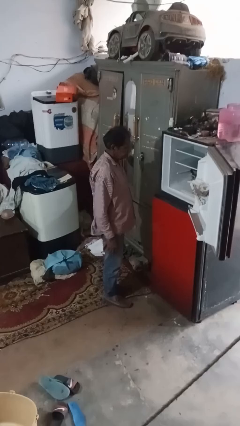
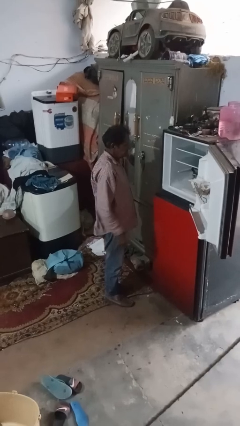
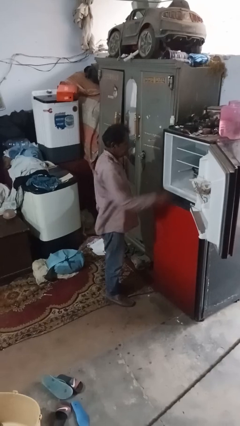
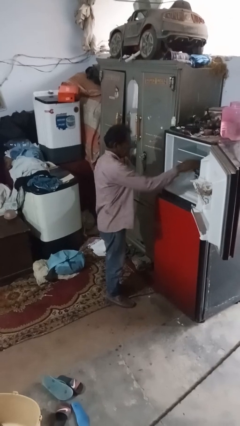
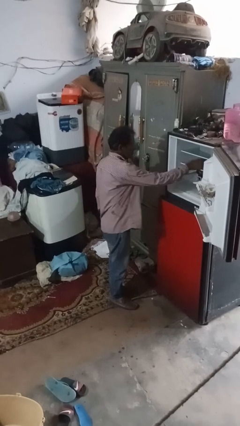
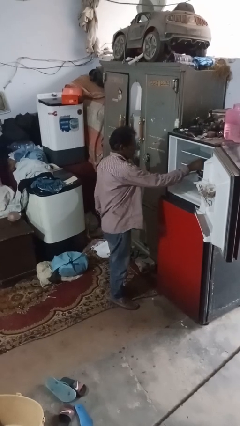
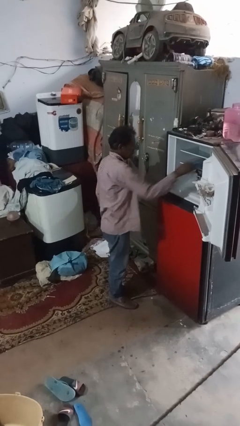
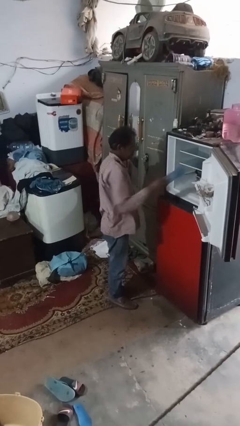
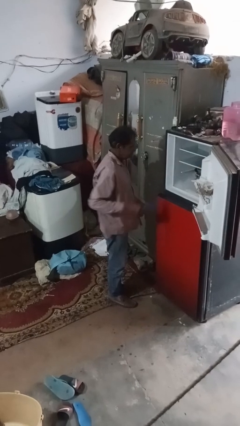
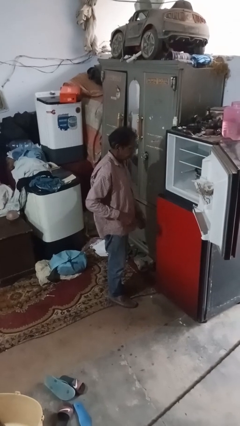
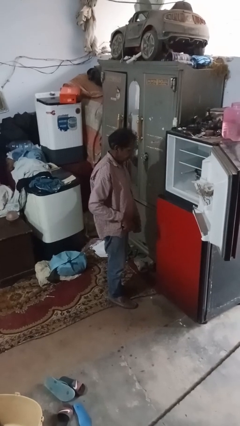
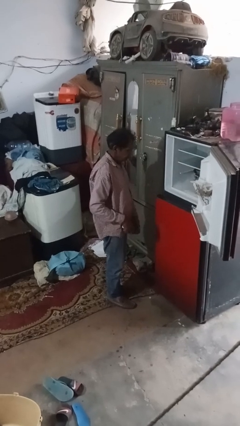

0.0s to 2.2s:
person takes object from refrigerator

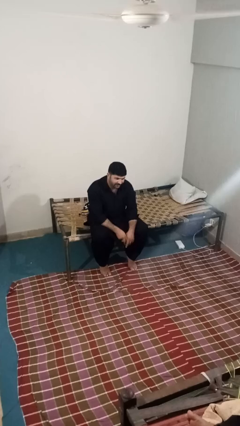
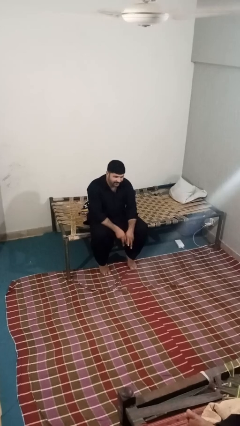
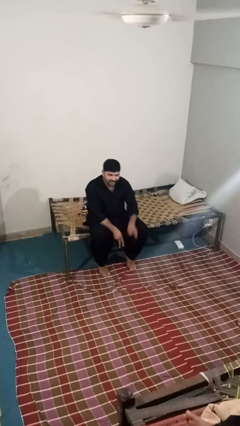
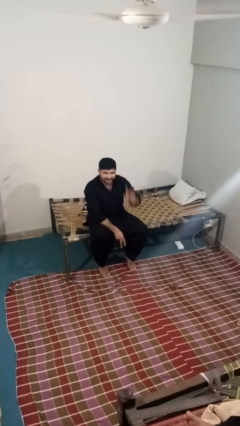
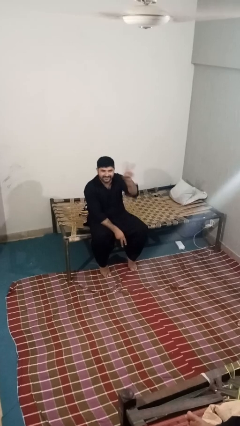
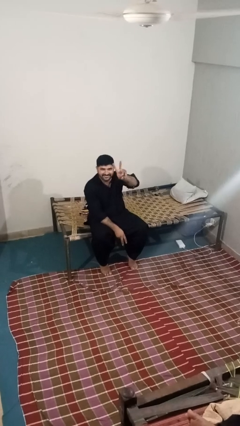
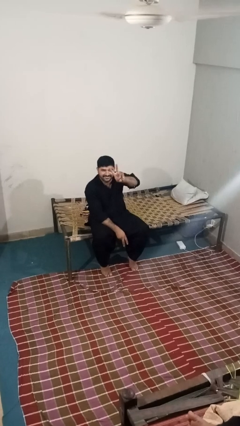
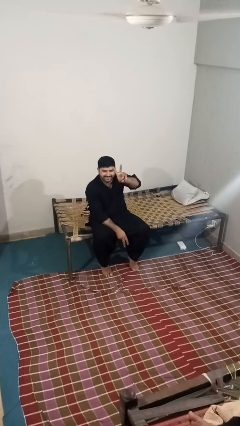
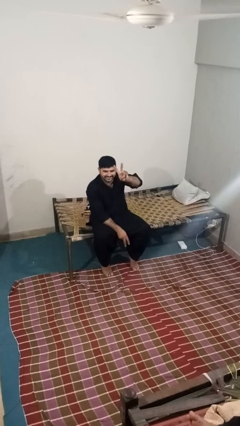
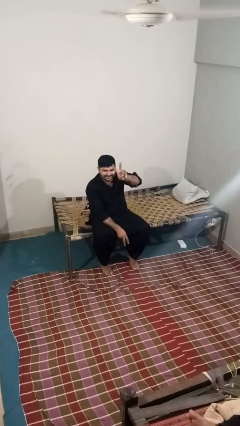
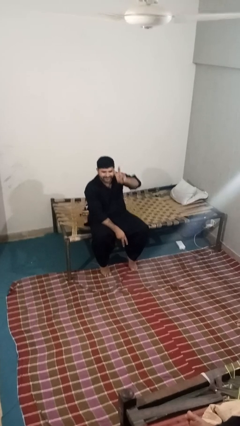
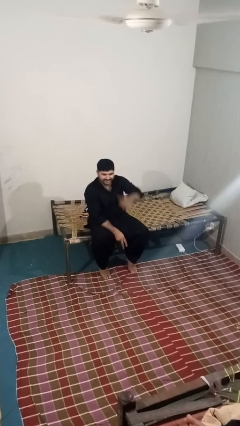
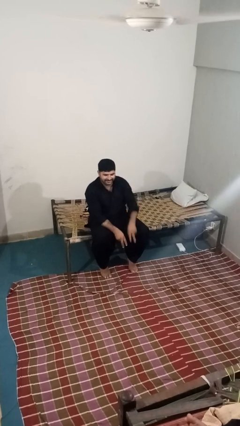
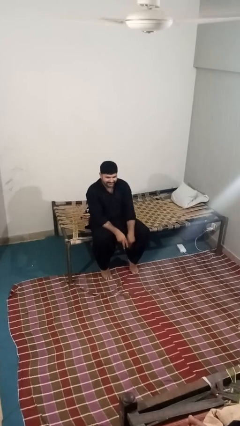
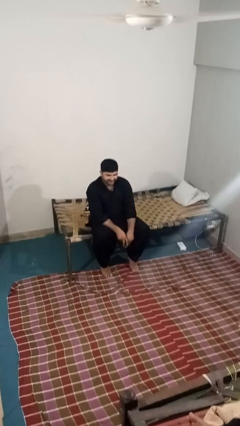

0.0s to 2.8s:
person gestures peace

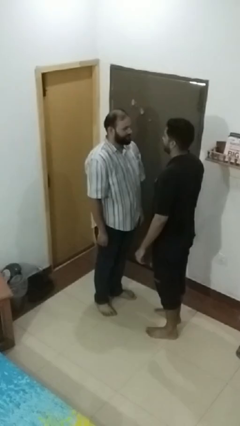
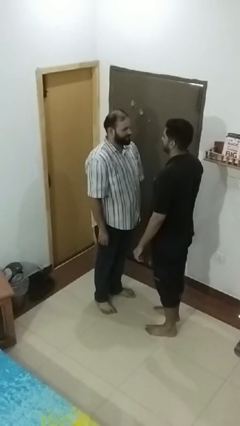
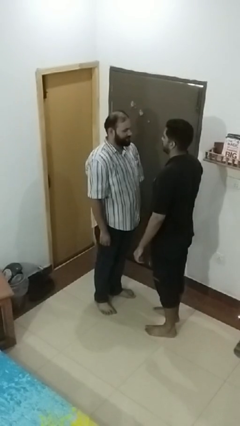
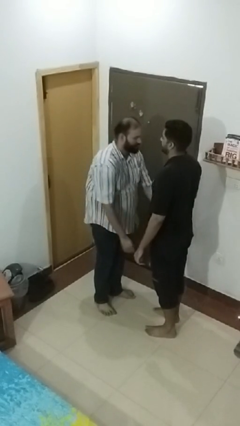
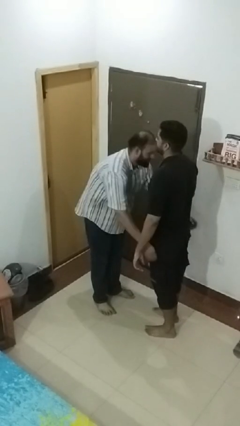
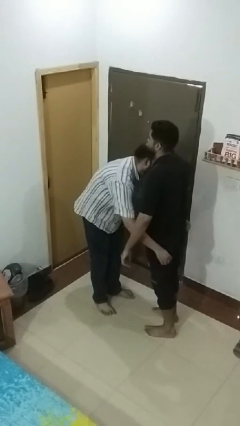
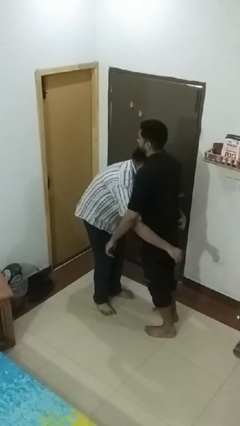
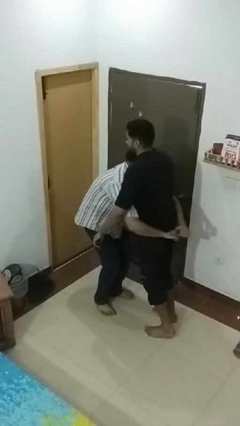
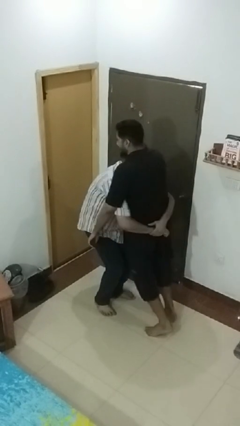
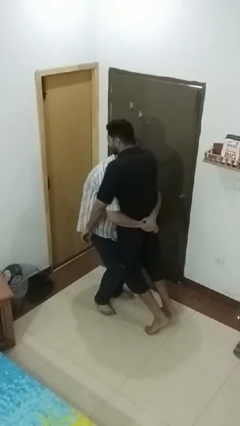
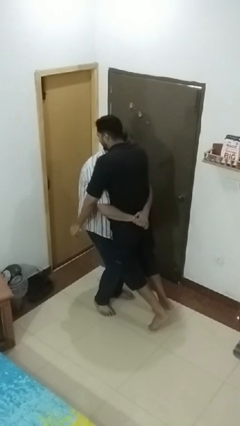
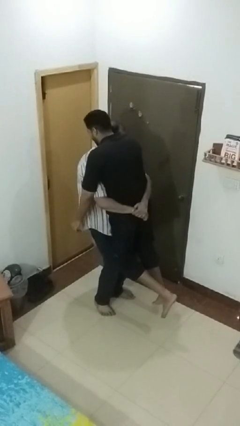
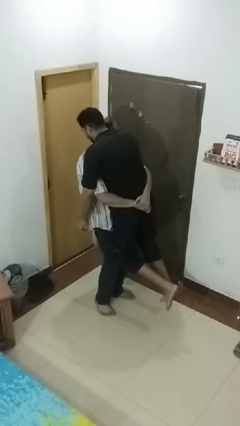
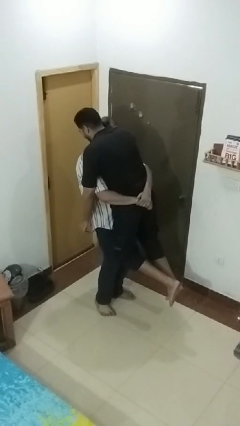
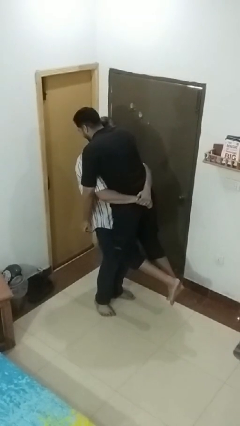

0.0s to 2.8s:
person picks up person

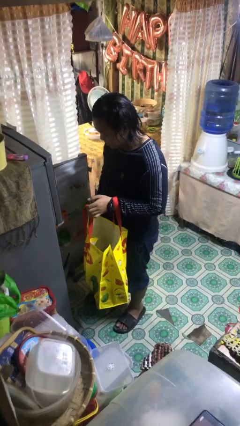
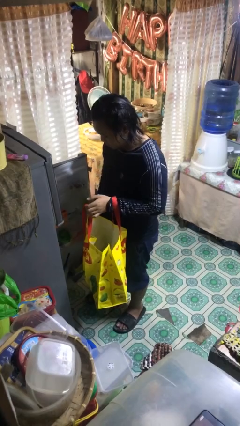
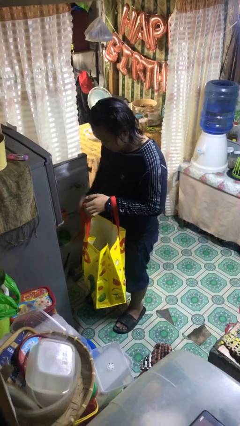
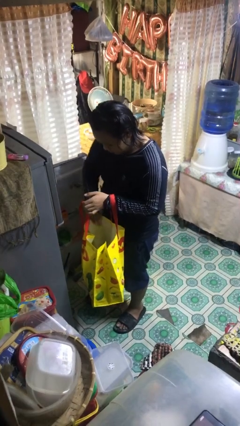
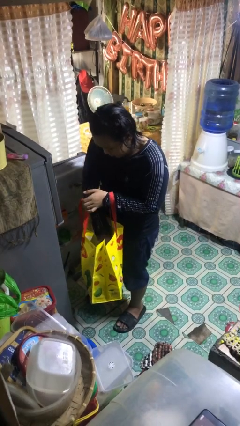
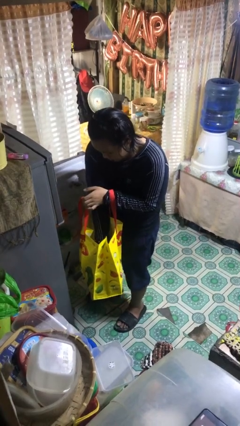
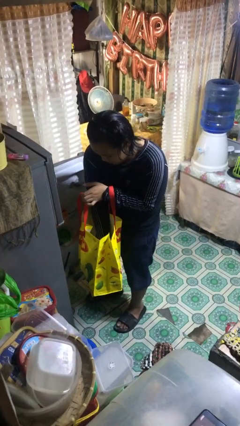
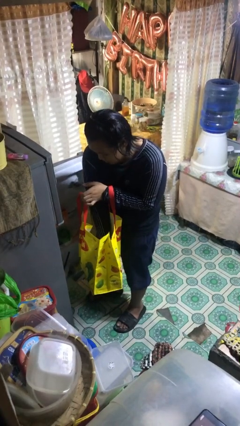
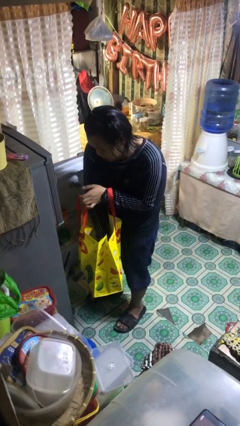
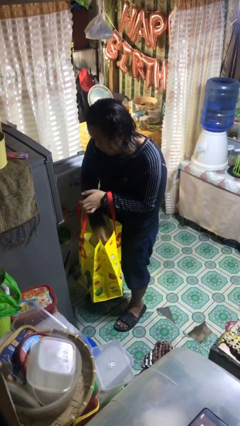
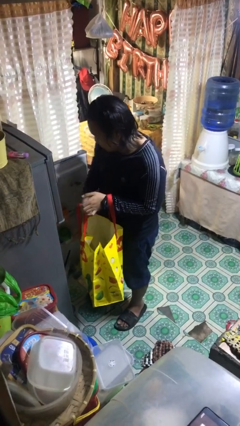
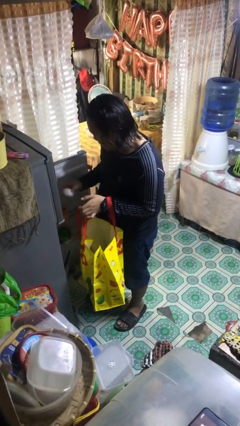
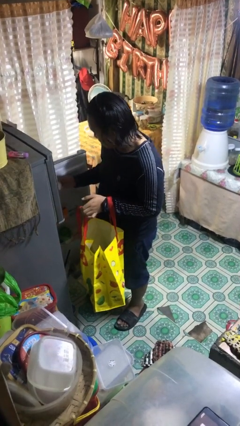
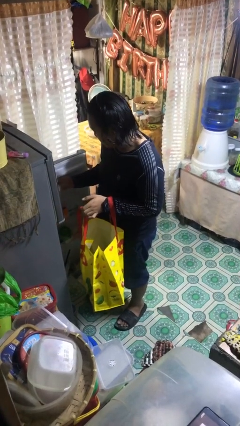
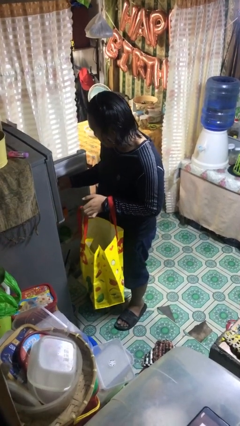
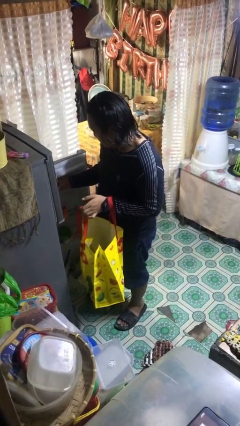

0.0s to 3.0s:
person loads groceries into refrigerator

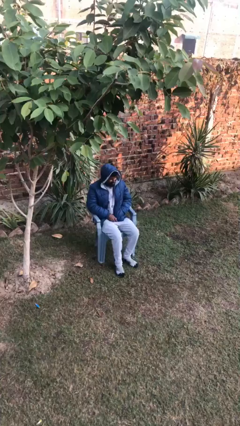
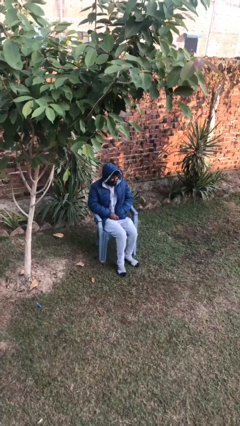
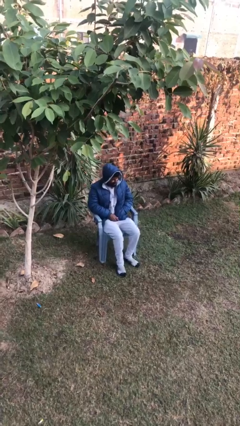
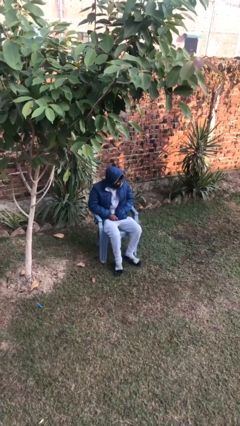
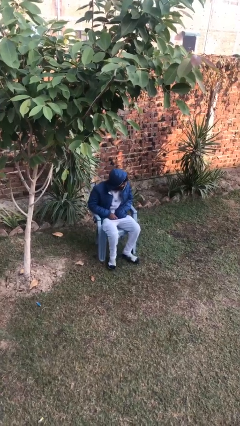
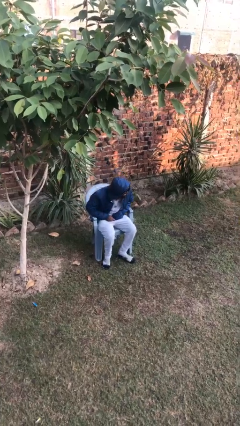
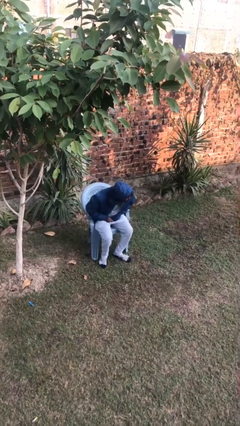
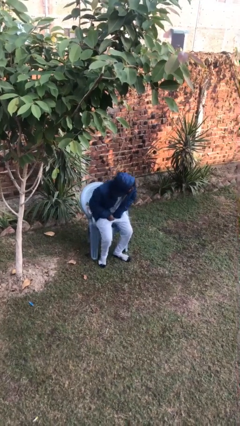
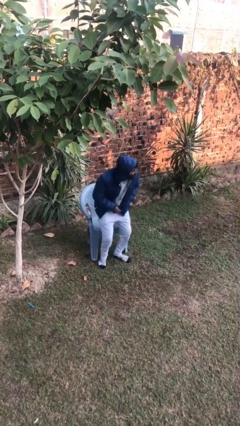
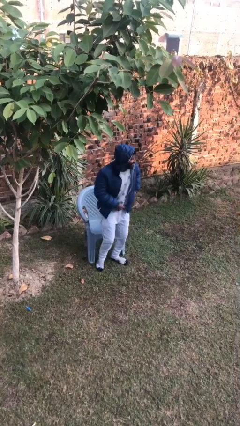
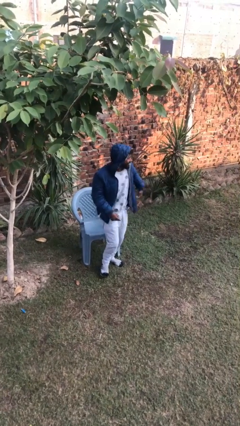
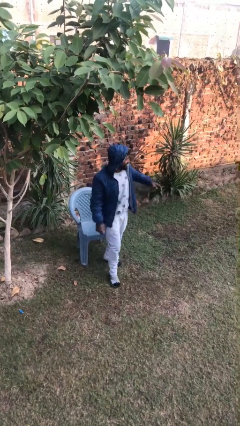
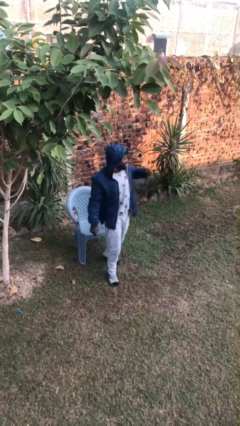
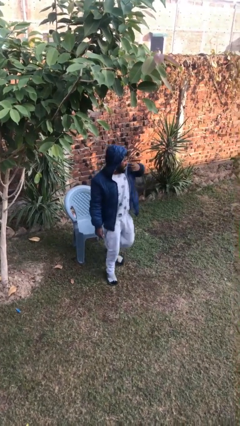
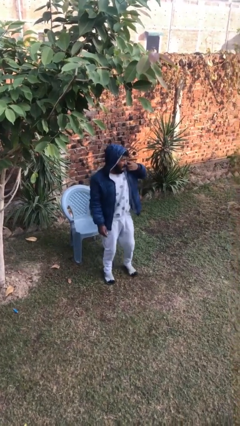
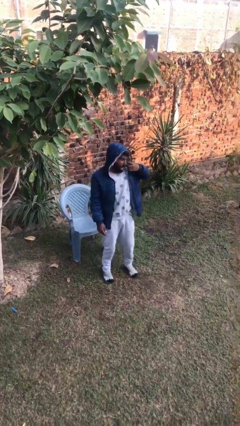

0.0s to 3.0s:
person stands up

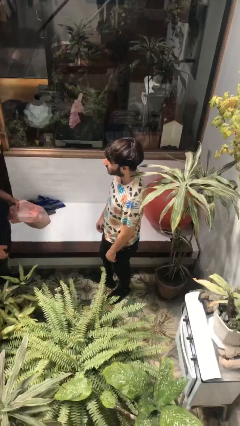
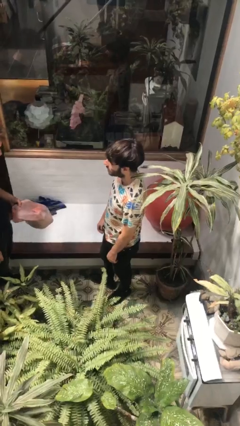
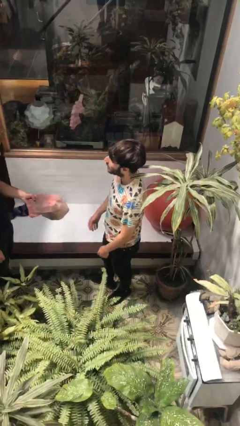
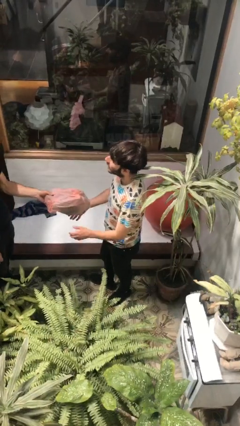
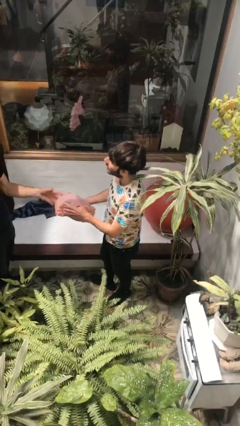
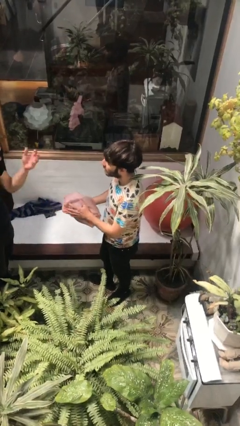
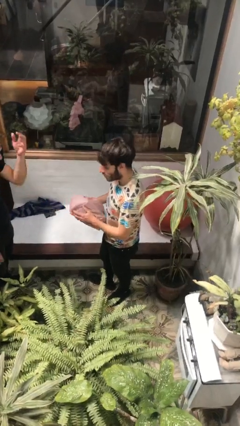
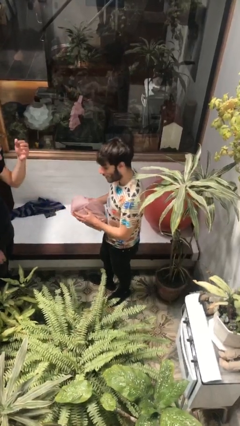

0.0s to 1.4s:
person transfers object to person

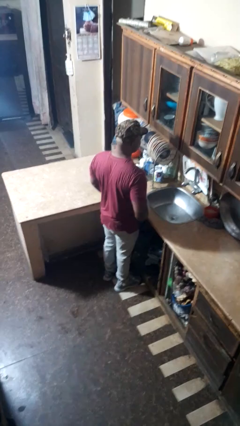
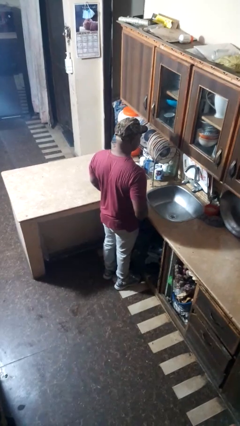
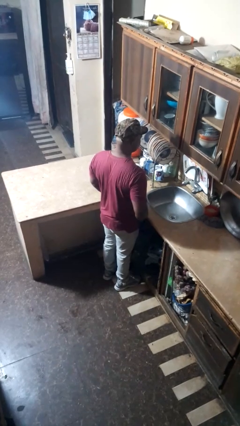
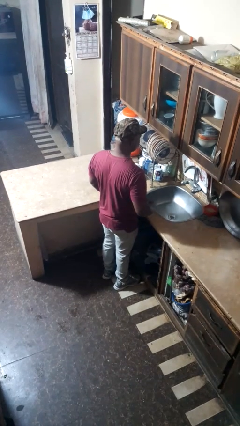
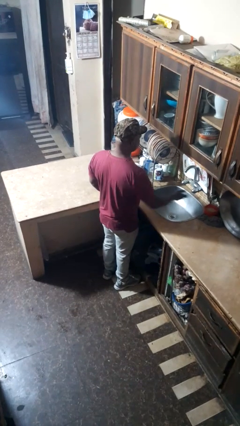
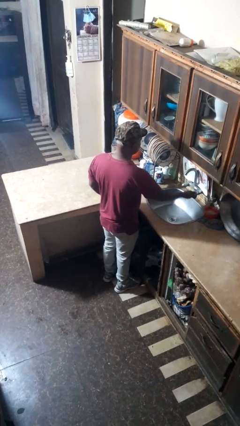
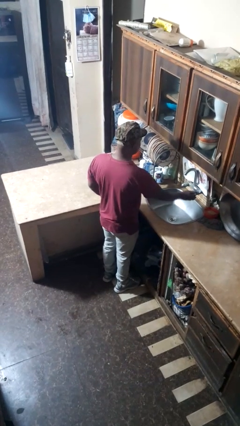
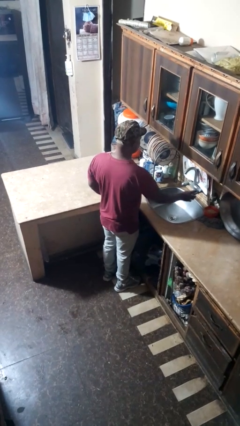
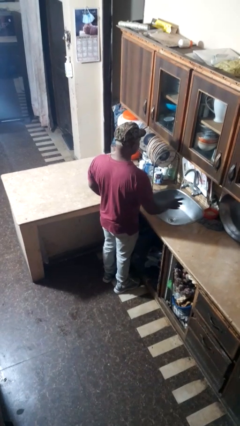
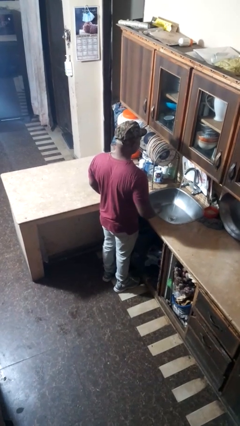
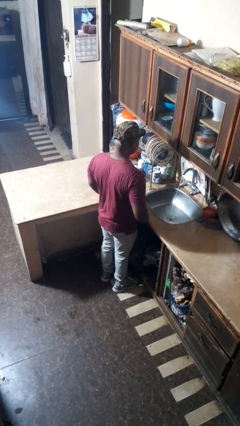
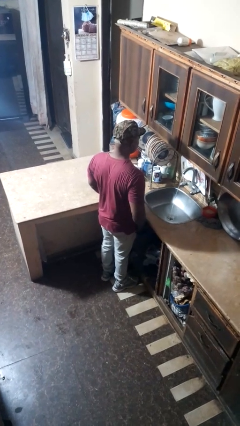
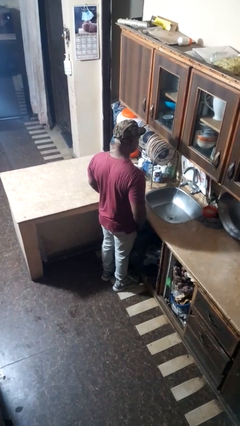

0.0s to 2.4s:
person turns on faucet
